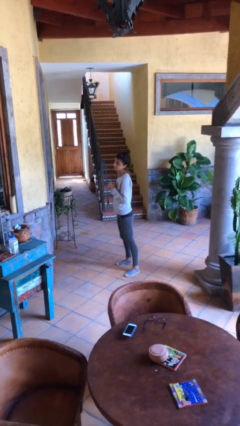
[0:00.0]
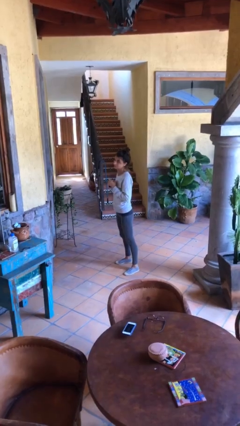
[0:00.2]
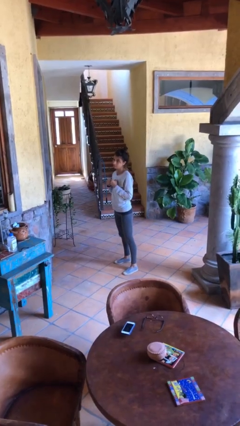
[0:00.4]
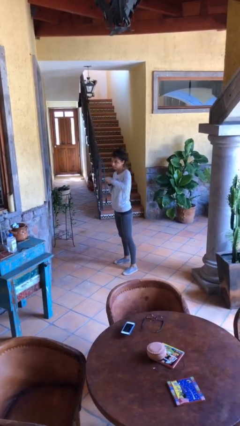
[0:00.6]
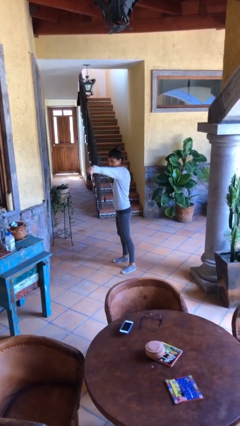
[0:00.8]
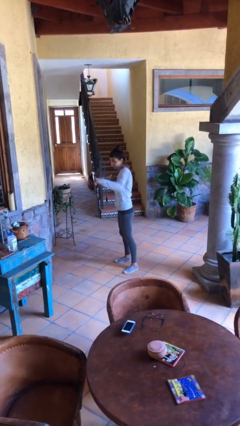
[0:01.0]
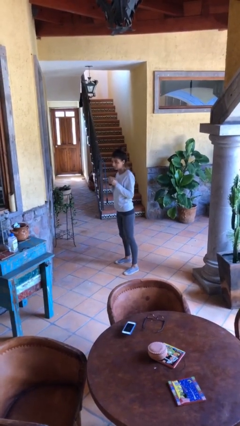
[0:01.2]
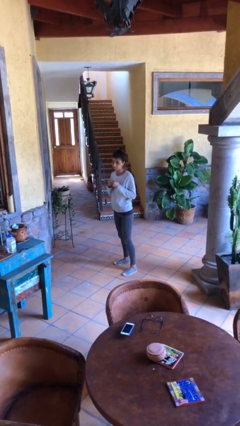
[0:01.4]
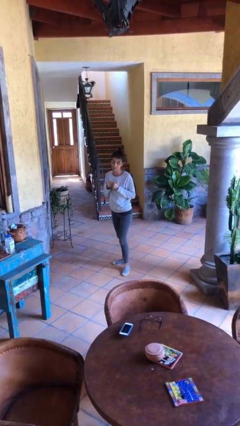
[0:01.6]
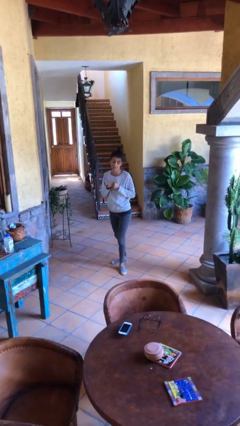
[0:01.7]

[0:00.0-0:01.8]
person karate chop

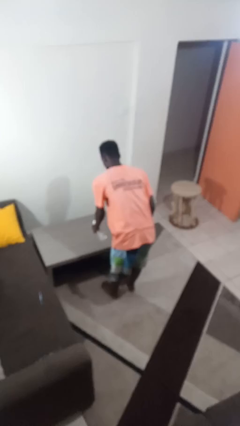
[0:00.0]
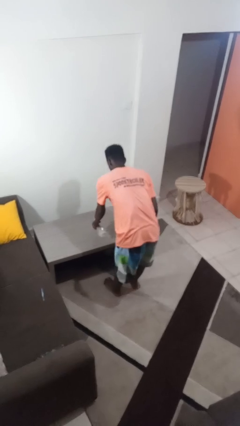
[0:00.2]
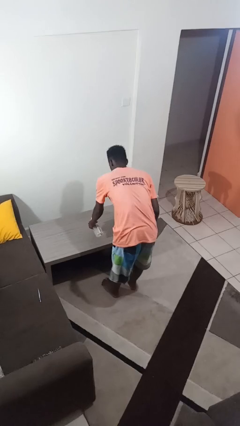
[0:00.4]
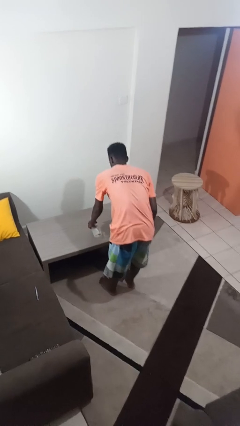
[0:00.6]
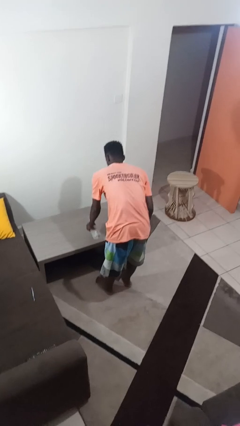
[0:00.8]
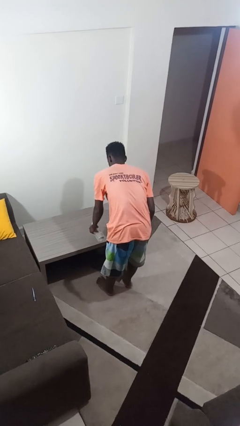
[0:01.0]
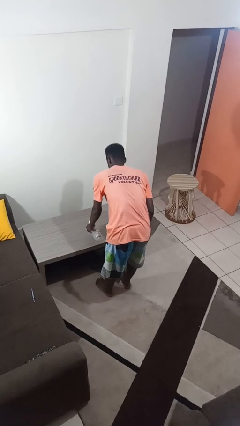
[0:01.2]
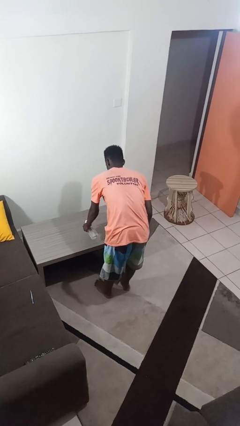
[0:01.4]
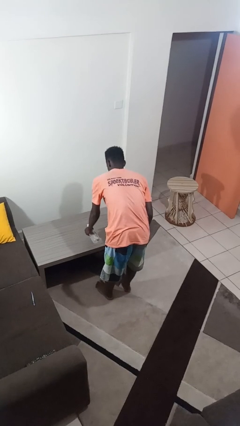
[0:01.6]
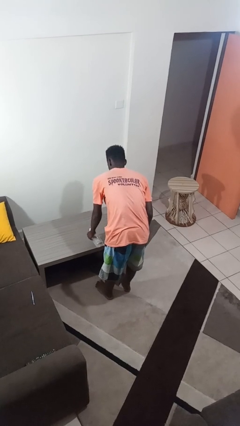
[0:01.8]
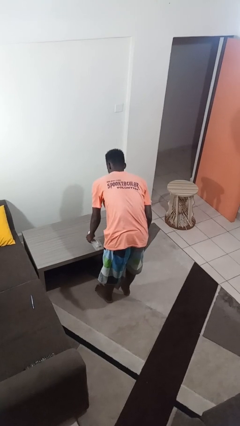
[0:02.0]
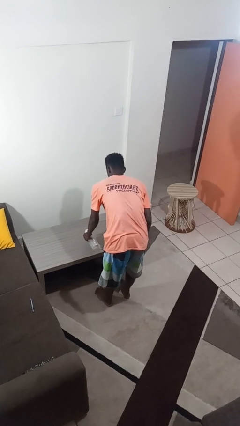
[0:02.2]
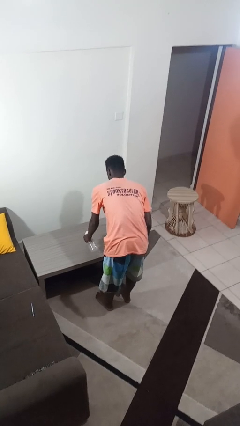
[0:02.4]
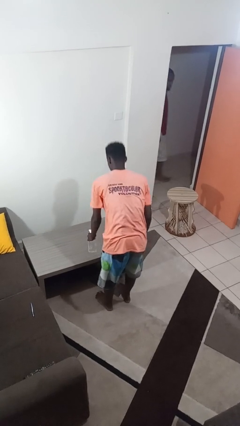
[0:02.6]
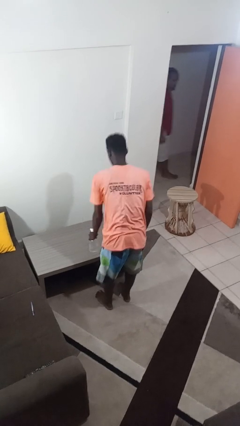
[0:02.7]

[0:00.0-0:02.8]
person sprays from bottle

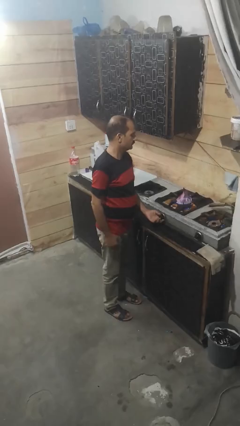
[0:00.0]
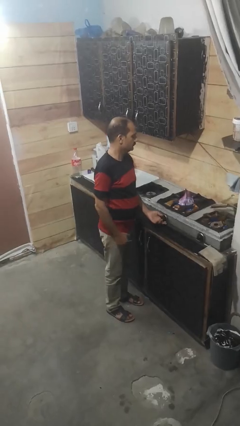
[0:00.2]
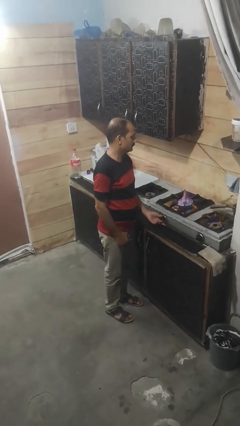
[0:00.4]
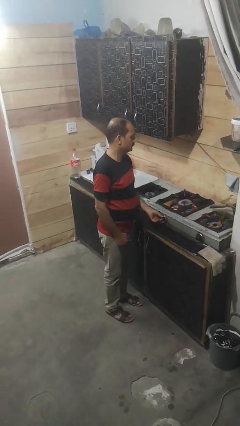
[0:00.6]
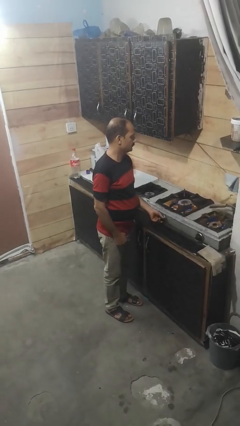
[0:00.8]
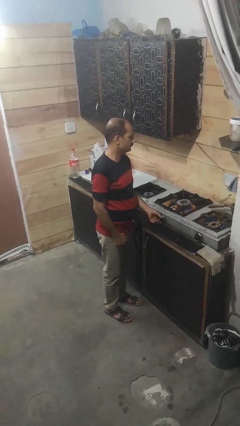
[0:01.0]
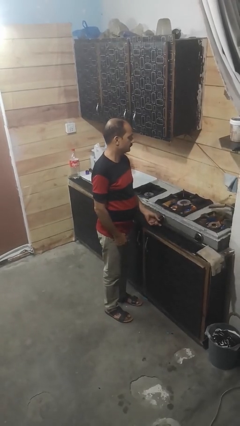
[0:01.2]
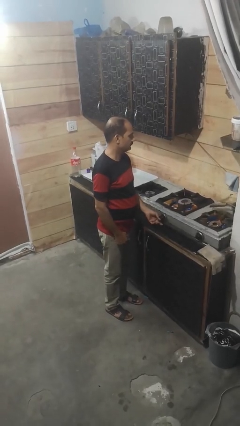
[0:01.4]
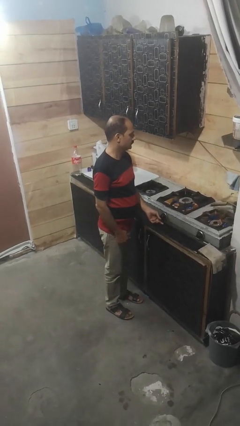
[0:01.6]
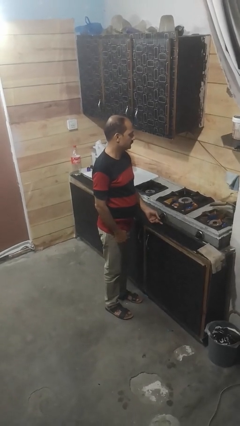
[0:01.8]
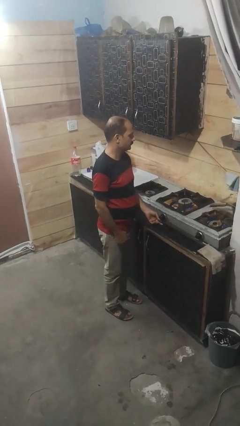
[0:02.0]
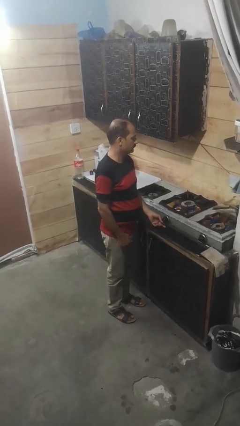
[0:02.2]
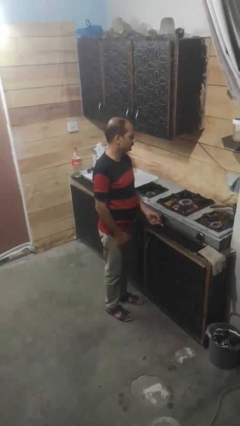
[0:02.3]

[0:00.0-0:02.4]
person turns off stovetop

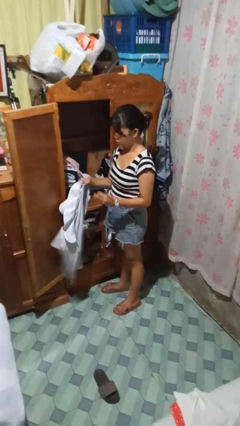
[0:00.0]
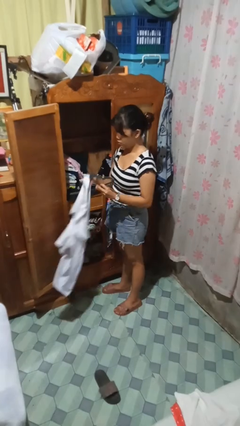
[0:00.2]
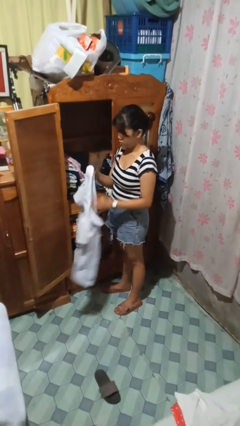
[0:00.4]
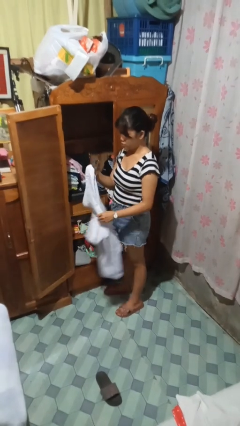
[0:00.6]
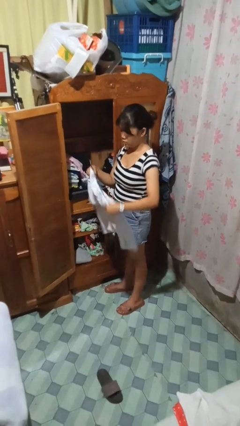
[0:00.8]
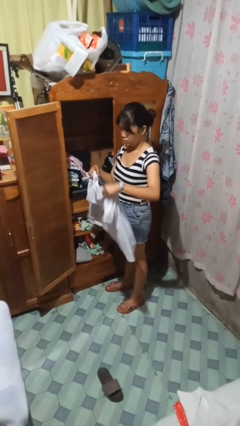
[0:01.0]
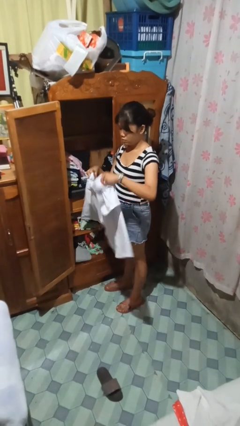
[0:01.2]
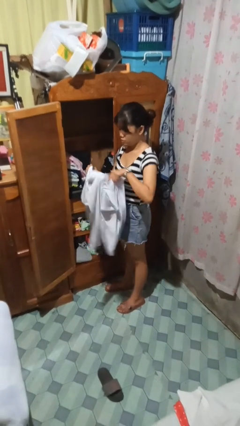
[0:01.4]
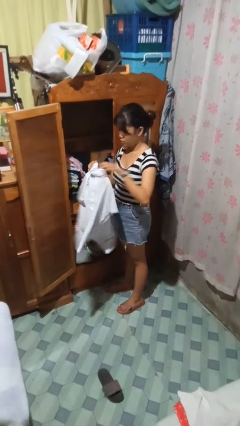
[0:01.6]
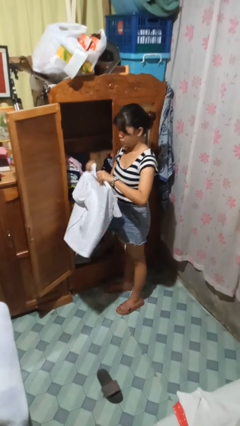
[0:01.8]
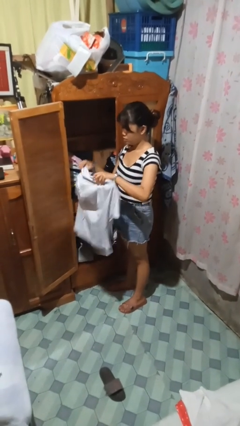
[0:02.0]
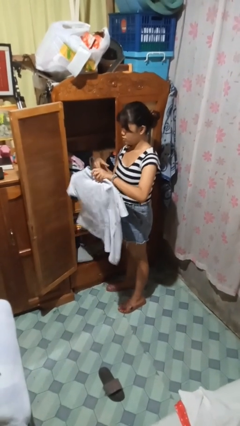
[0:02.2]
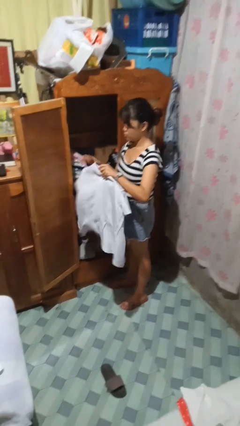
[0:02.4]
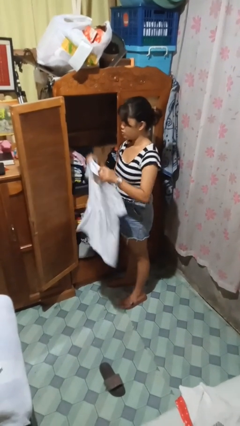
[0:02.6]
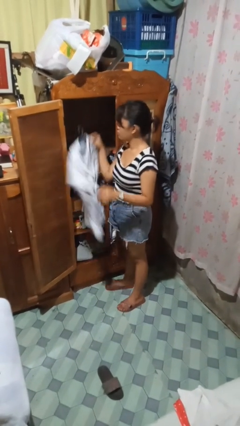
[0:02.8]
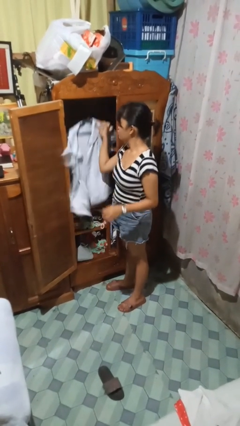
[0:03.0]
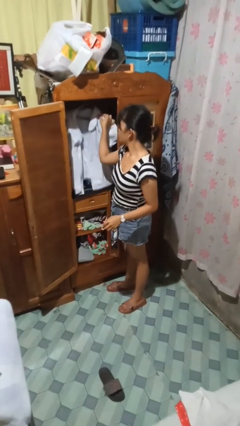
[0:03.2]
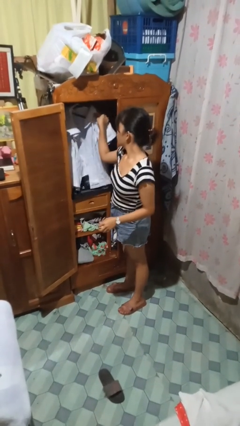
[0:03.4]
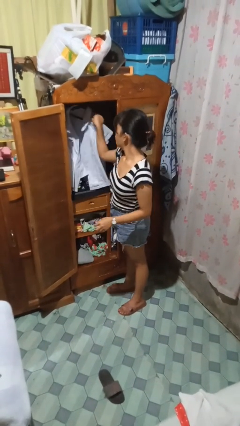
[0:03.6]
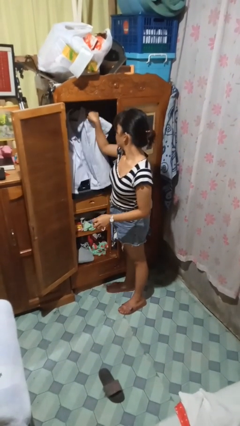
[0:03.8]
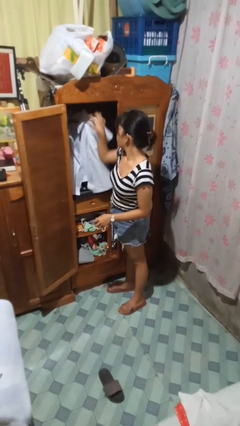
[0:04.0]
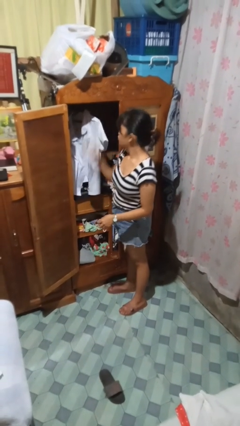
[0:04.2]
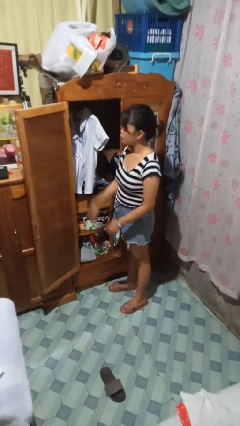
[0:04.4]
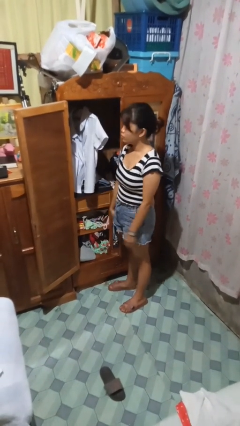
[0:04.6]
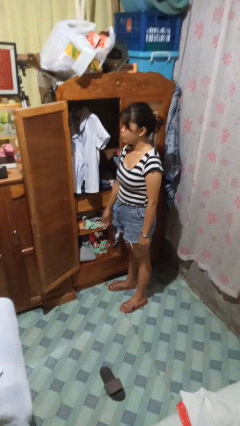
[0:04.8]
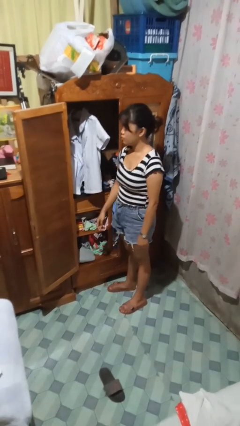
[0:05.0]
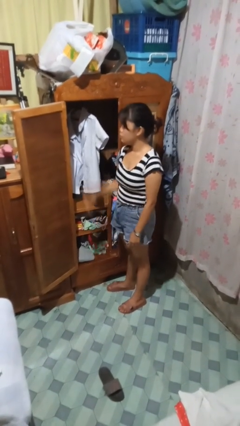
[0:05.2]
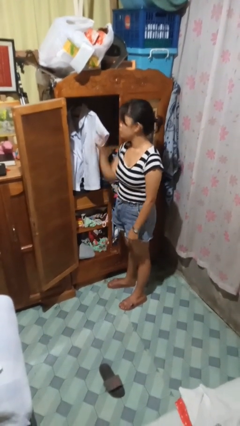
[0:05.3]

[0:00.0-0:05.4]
person puts clothes into closet

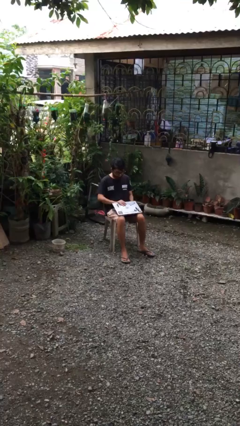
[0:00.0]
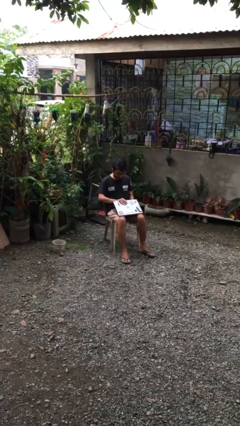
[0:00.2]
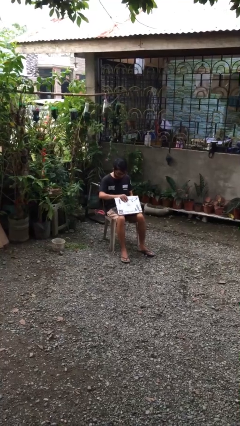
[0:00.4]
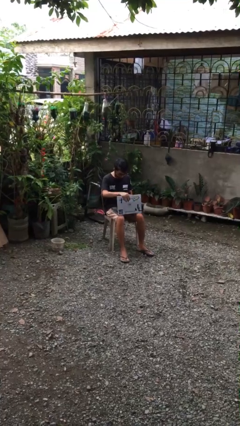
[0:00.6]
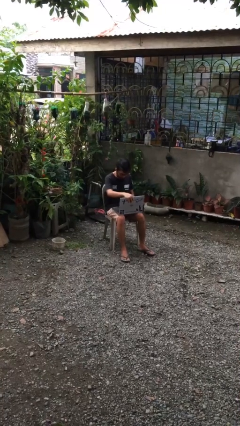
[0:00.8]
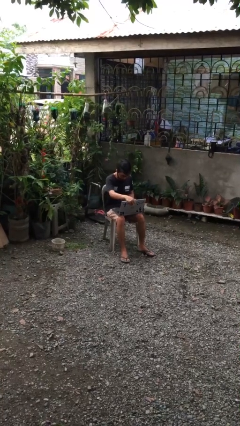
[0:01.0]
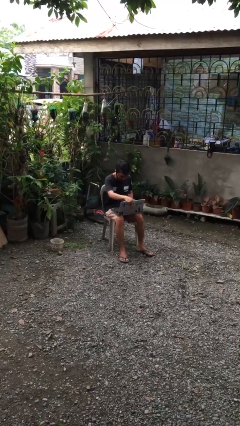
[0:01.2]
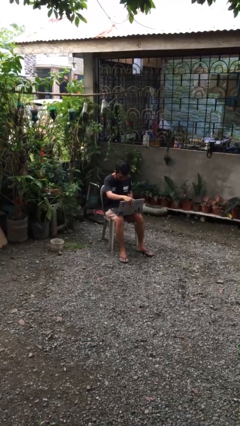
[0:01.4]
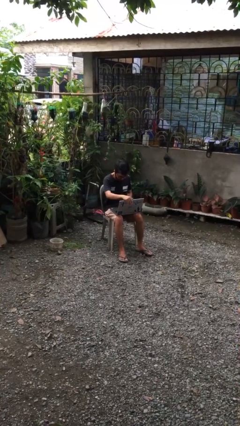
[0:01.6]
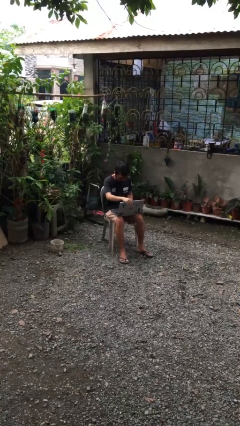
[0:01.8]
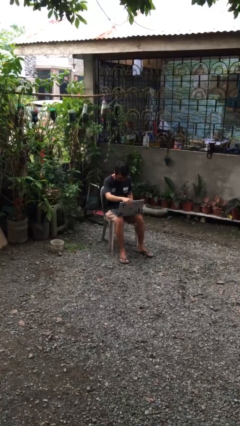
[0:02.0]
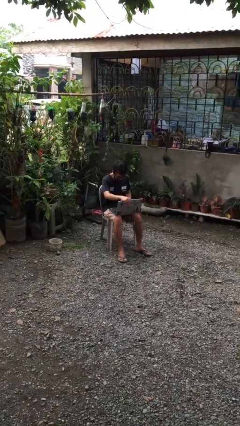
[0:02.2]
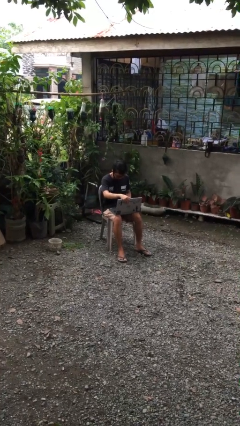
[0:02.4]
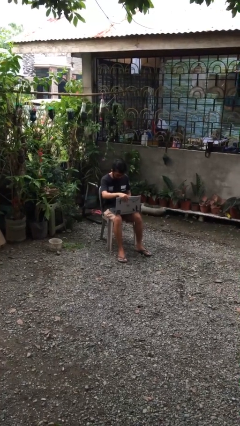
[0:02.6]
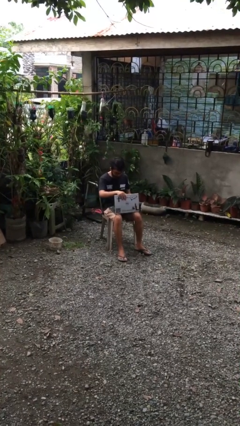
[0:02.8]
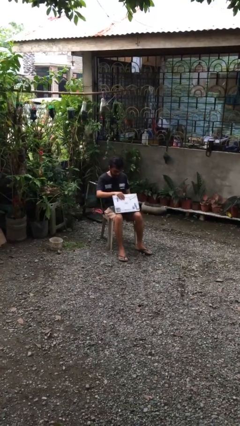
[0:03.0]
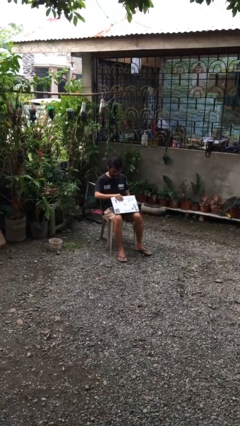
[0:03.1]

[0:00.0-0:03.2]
person interacts with laptop

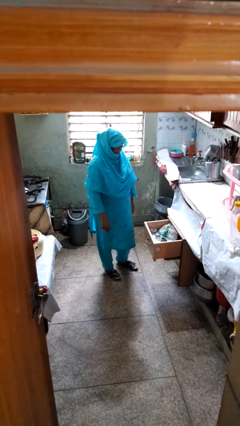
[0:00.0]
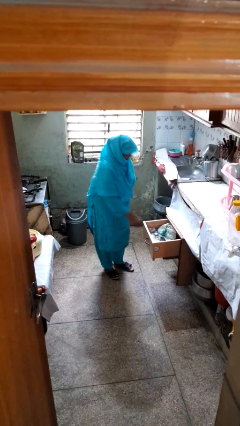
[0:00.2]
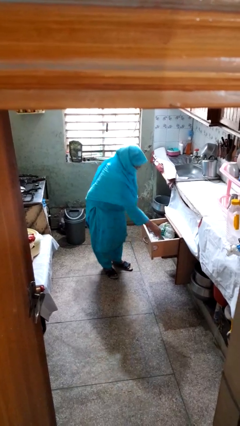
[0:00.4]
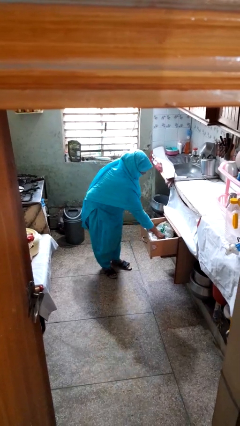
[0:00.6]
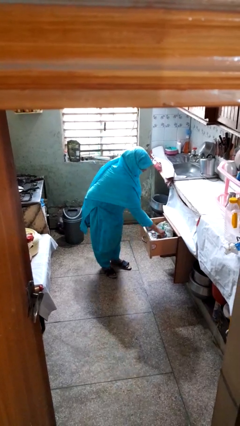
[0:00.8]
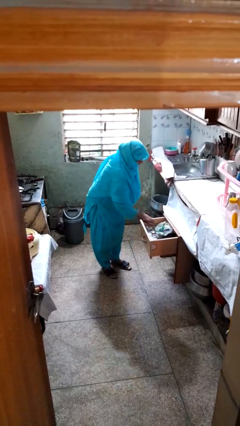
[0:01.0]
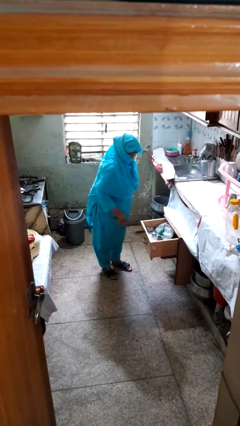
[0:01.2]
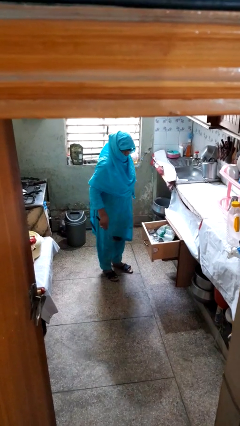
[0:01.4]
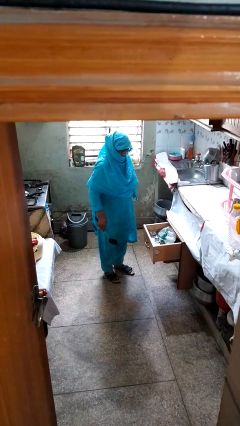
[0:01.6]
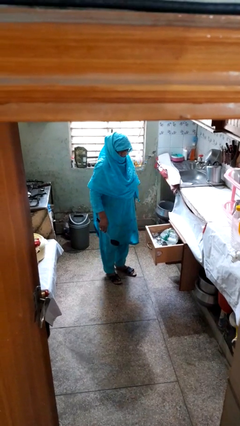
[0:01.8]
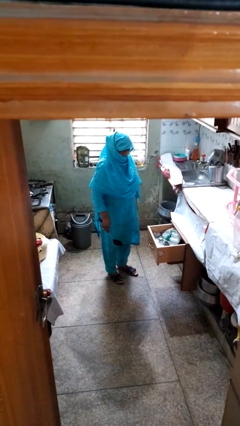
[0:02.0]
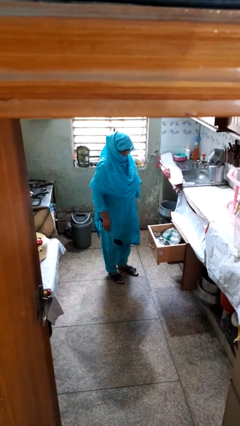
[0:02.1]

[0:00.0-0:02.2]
person takes object from kitchen drawer
